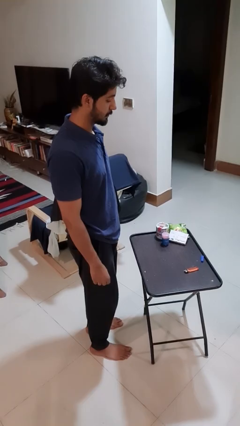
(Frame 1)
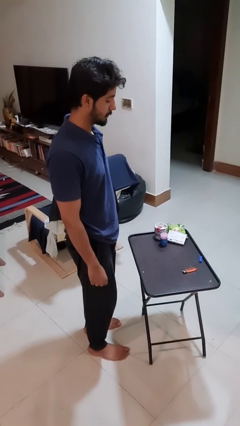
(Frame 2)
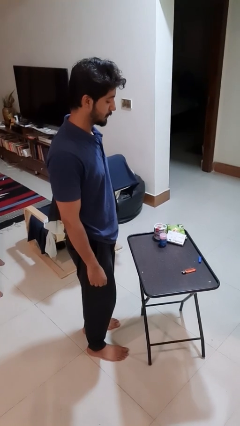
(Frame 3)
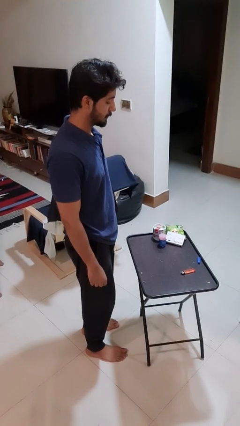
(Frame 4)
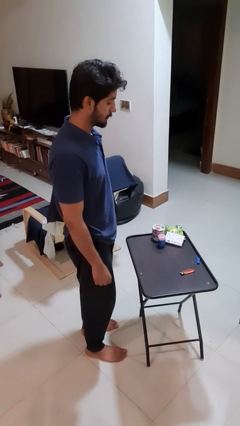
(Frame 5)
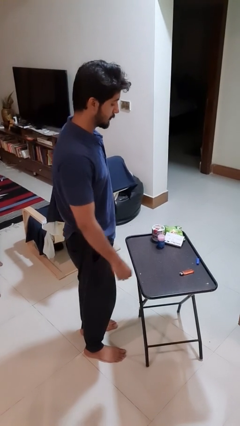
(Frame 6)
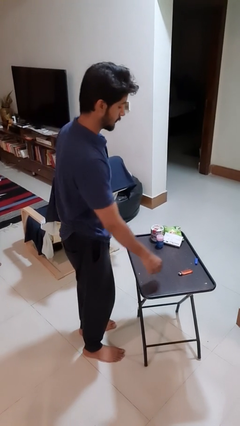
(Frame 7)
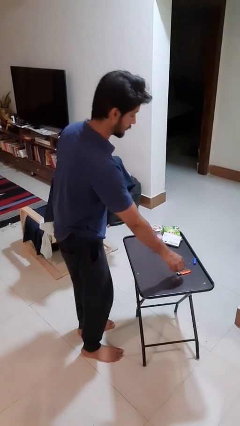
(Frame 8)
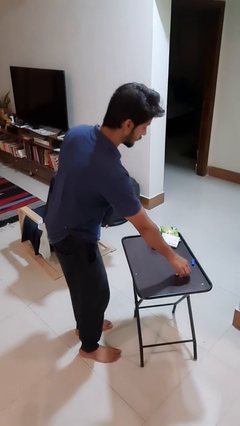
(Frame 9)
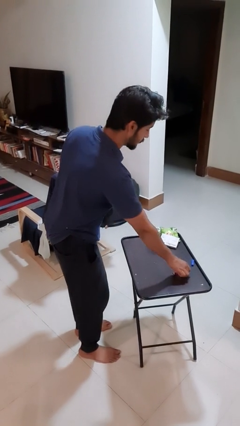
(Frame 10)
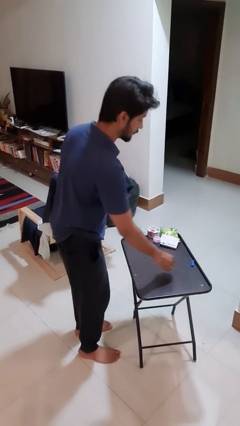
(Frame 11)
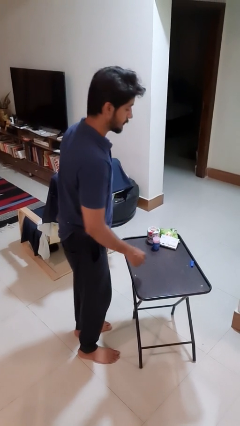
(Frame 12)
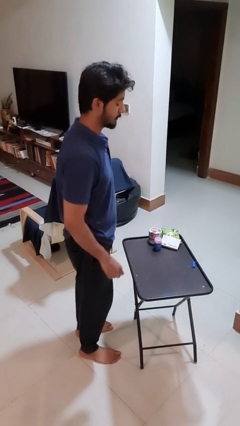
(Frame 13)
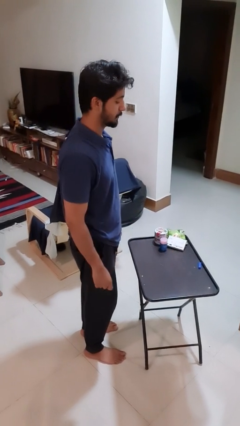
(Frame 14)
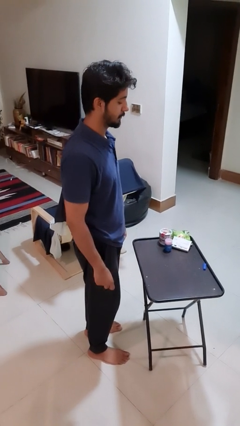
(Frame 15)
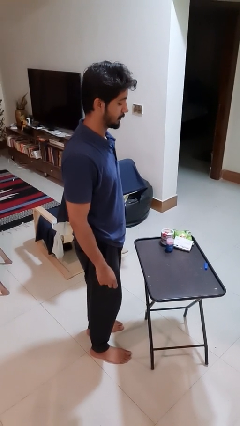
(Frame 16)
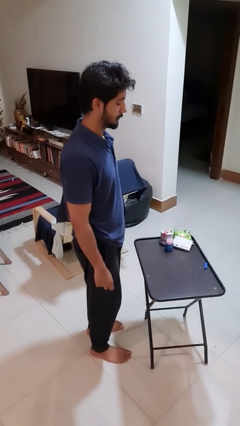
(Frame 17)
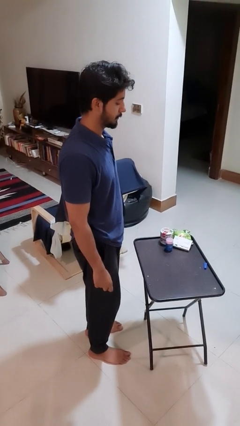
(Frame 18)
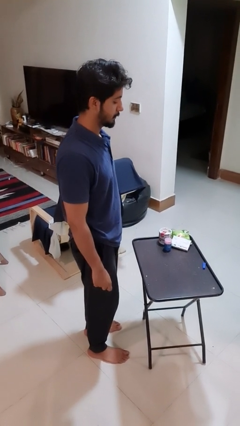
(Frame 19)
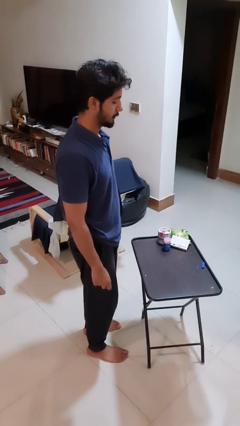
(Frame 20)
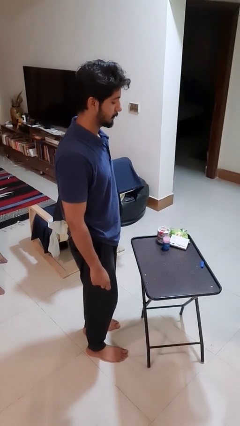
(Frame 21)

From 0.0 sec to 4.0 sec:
person picks up object from table

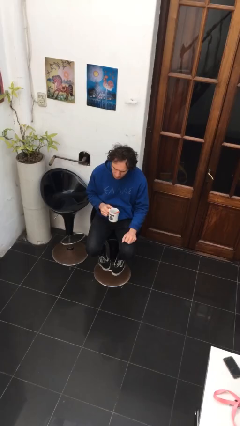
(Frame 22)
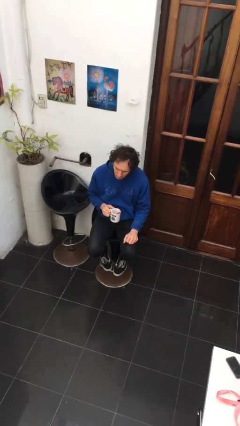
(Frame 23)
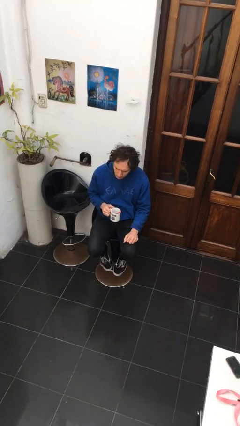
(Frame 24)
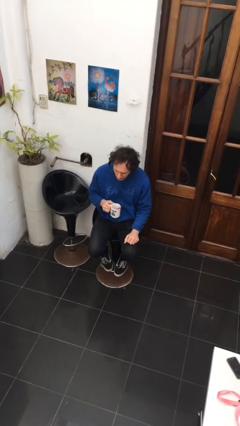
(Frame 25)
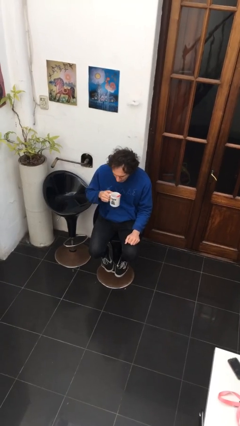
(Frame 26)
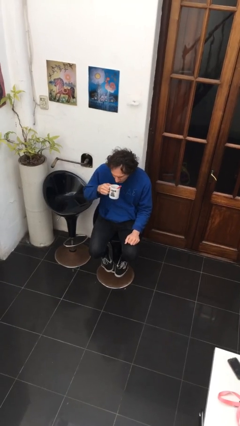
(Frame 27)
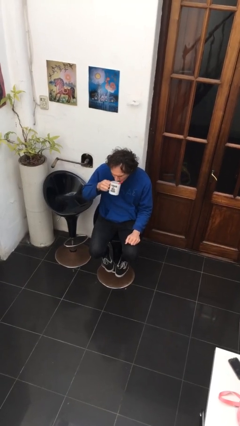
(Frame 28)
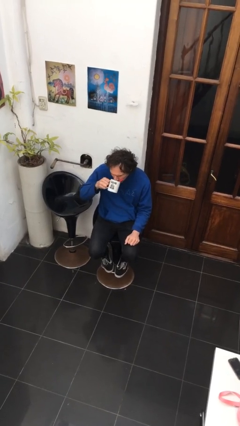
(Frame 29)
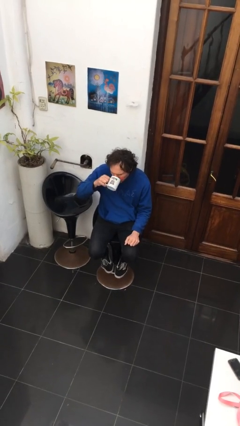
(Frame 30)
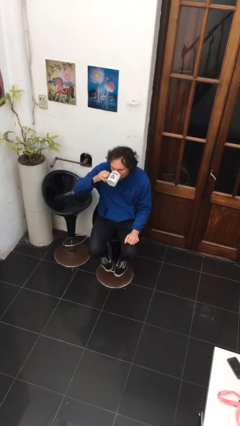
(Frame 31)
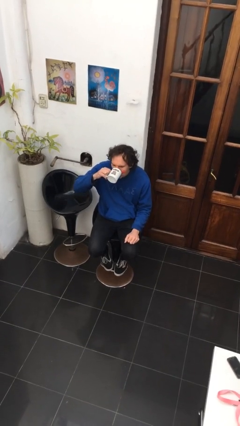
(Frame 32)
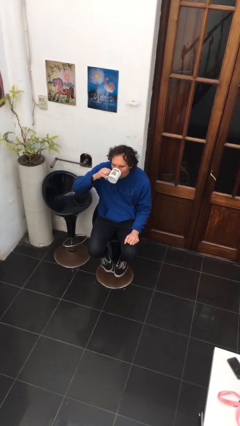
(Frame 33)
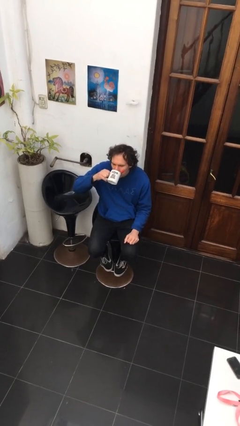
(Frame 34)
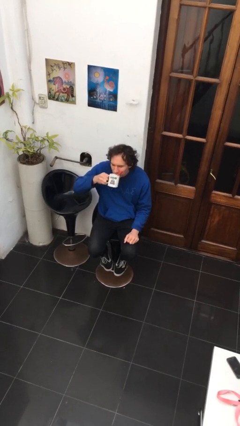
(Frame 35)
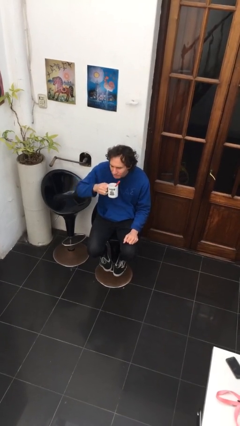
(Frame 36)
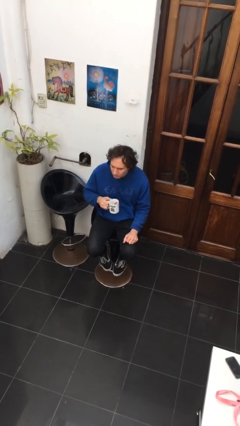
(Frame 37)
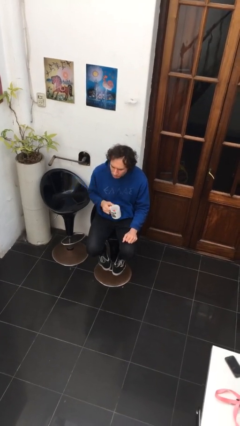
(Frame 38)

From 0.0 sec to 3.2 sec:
person drinks from mug

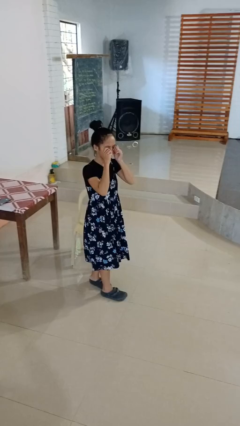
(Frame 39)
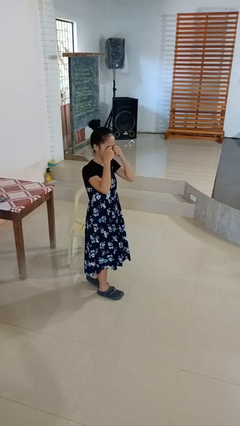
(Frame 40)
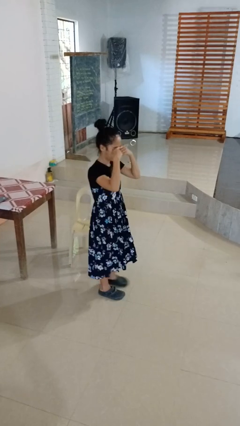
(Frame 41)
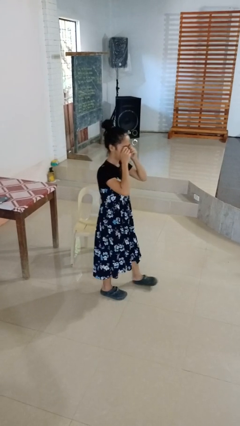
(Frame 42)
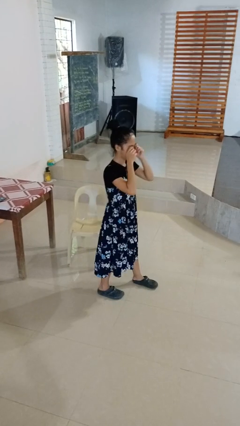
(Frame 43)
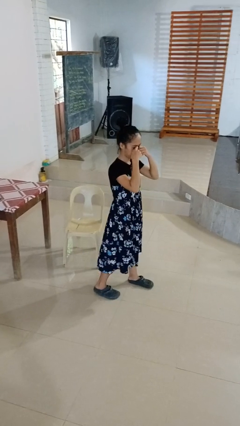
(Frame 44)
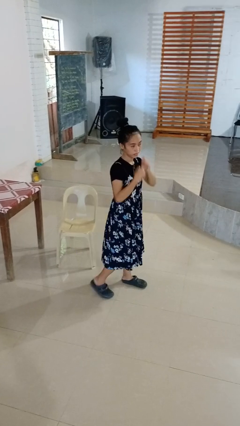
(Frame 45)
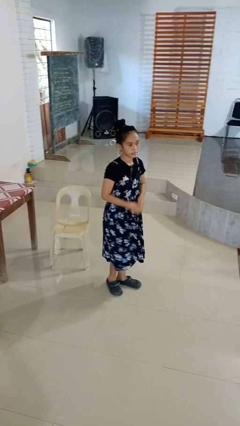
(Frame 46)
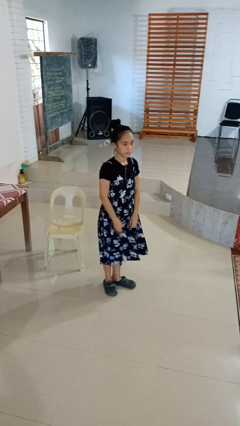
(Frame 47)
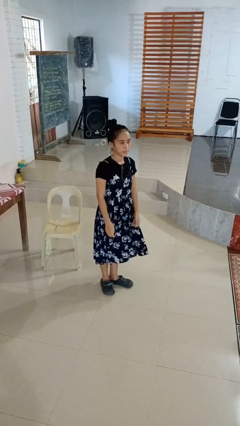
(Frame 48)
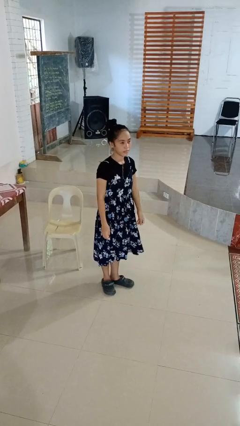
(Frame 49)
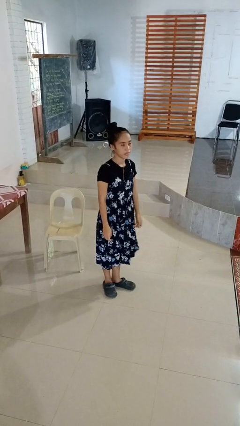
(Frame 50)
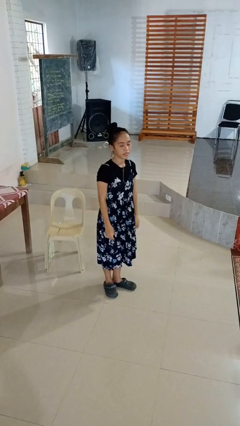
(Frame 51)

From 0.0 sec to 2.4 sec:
person rubs eyes

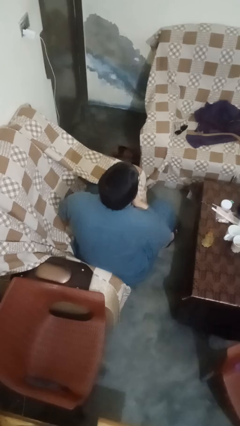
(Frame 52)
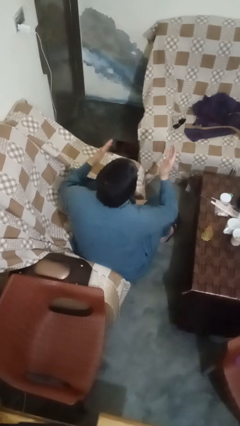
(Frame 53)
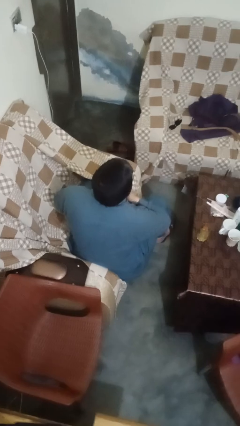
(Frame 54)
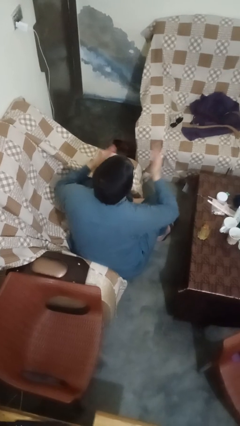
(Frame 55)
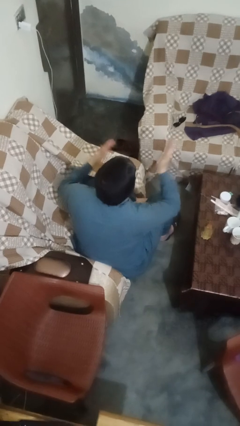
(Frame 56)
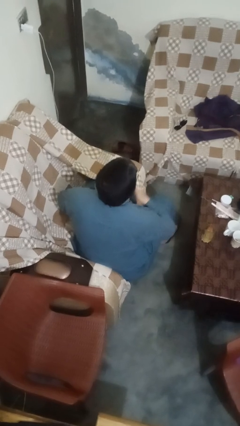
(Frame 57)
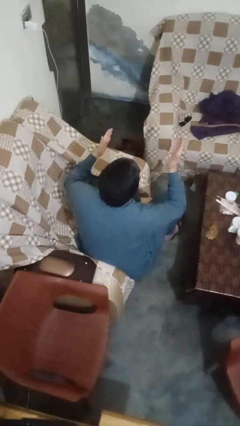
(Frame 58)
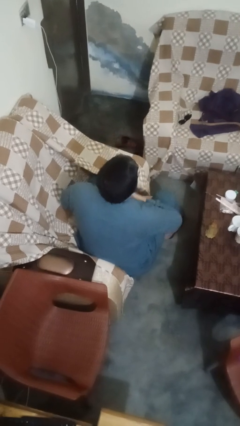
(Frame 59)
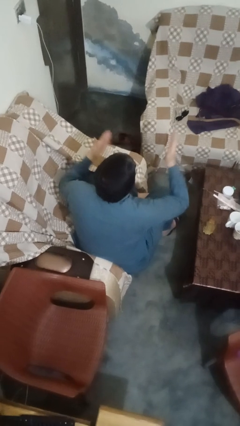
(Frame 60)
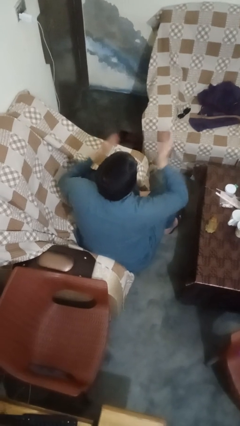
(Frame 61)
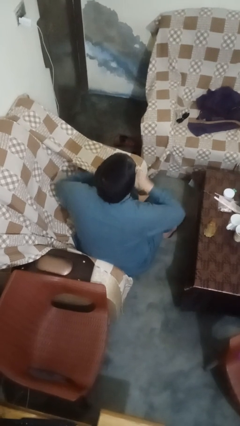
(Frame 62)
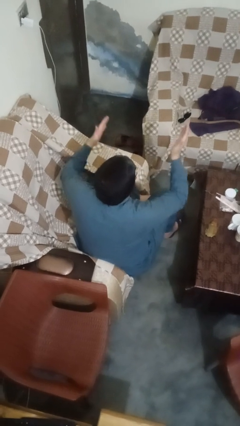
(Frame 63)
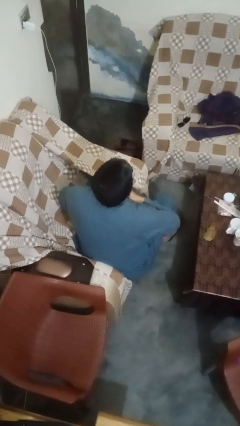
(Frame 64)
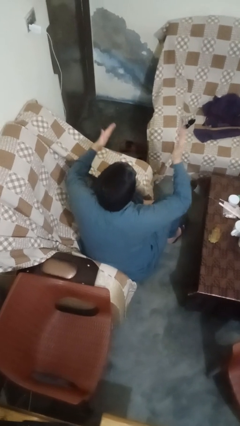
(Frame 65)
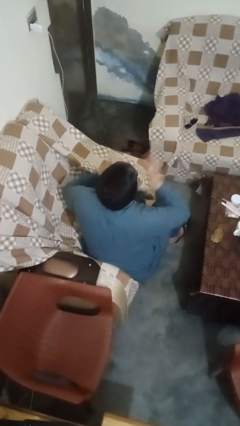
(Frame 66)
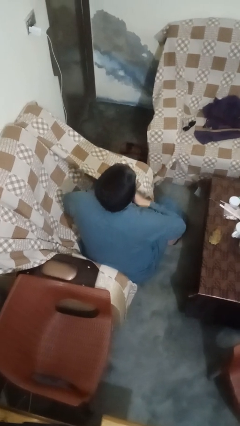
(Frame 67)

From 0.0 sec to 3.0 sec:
person drums on chest

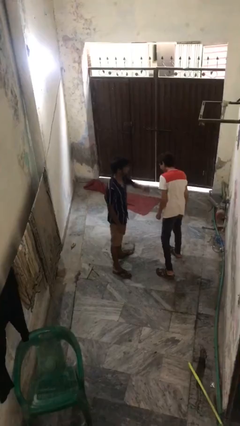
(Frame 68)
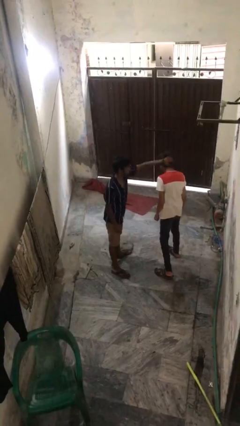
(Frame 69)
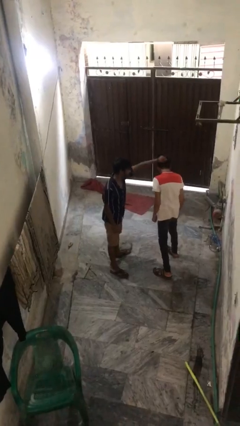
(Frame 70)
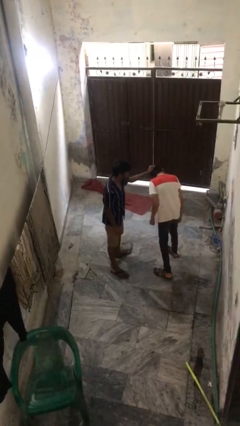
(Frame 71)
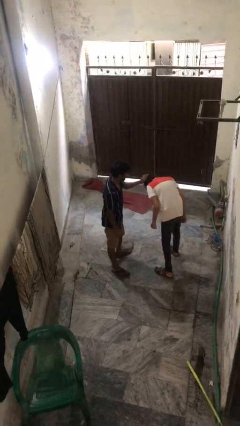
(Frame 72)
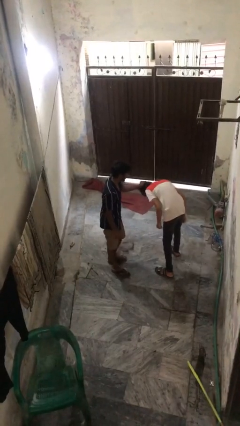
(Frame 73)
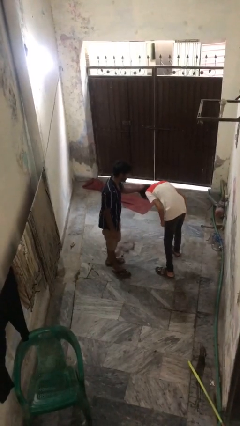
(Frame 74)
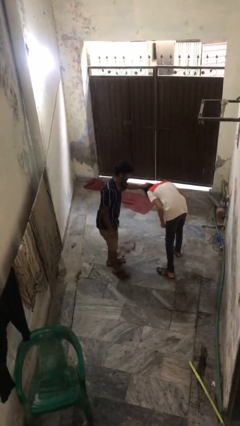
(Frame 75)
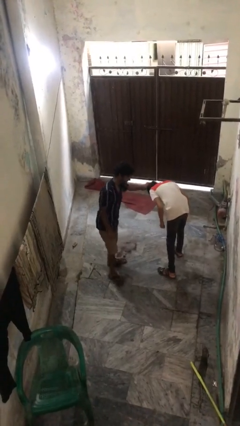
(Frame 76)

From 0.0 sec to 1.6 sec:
person grabs person by hair

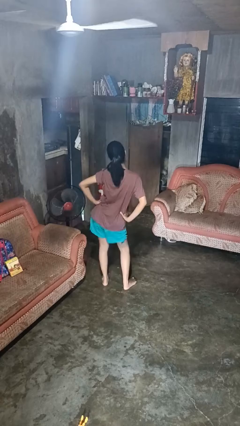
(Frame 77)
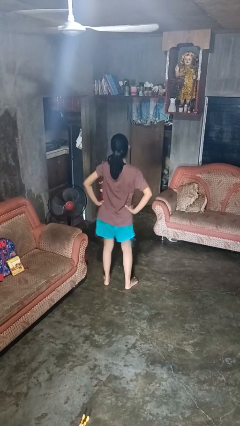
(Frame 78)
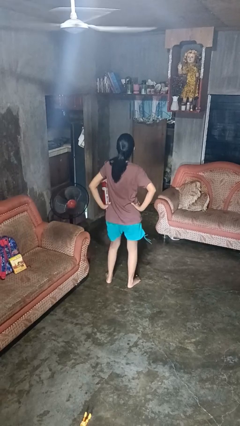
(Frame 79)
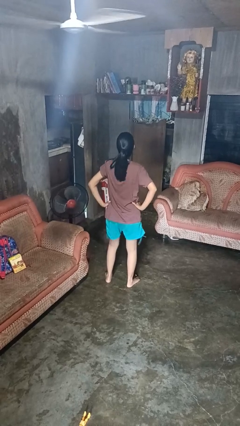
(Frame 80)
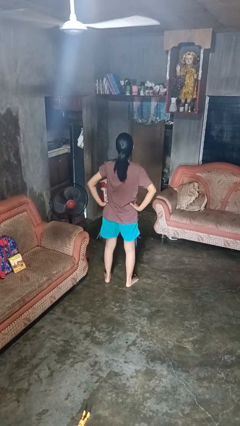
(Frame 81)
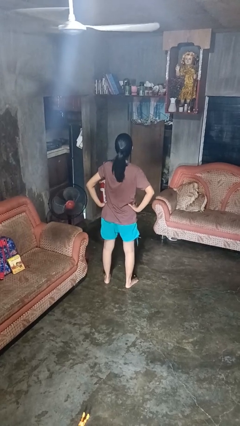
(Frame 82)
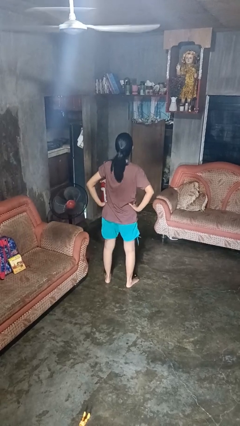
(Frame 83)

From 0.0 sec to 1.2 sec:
person dances in place

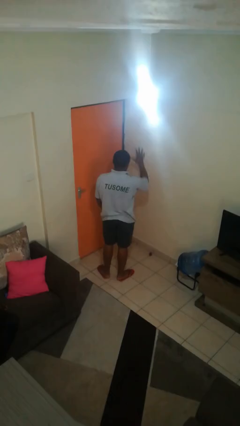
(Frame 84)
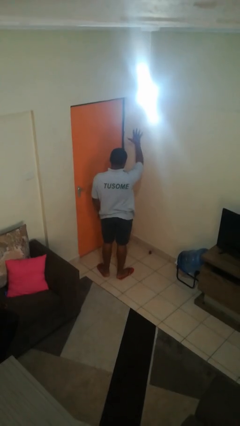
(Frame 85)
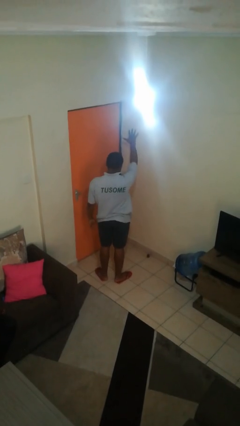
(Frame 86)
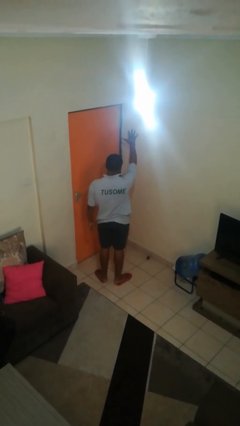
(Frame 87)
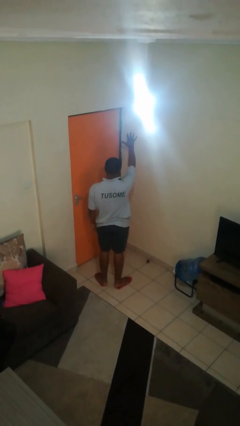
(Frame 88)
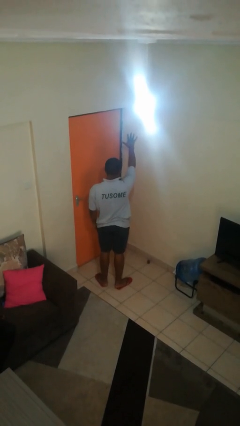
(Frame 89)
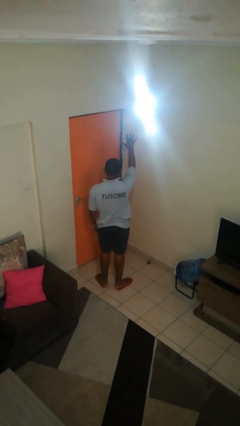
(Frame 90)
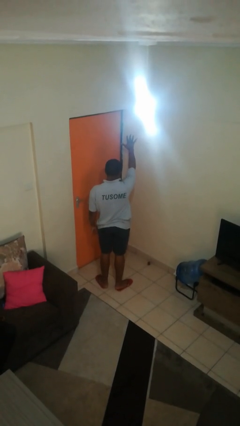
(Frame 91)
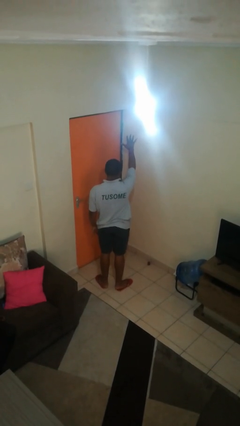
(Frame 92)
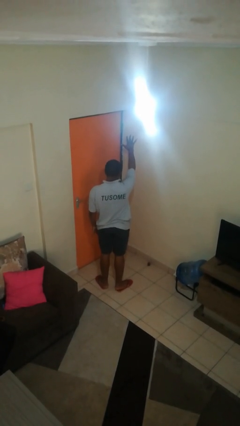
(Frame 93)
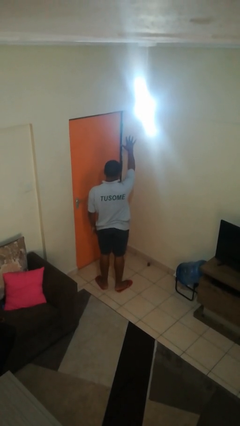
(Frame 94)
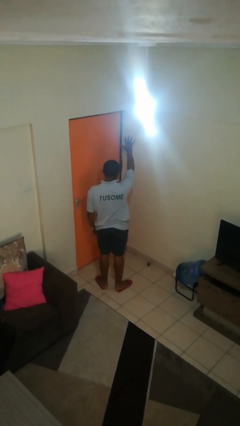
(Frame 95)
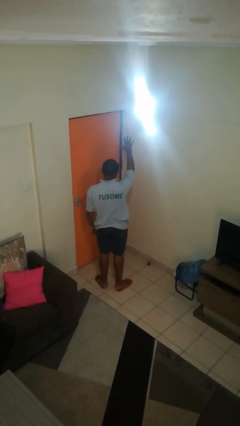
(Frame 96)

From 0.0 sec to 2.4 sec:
person gestures number five
